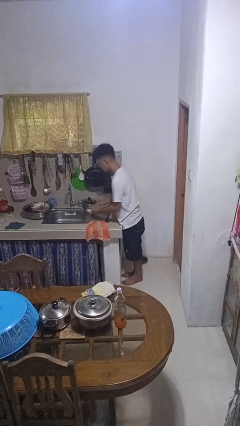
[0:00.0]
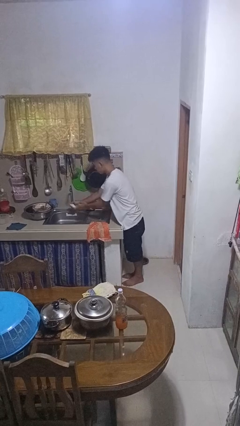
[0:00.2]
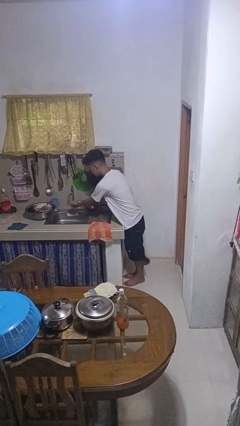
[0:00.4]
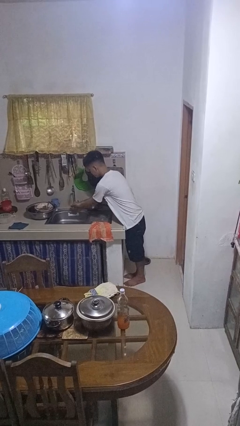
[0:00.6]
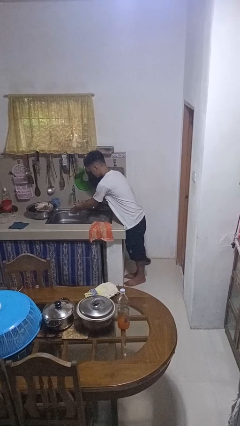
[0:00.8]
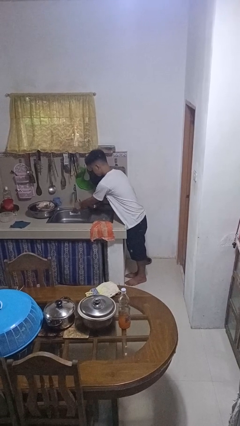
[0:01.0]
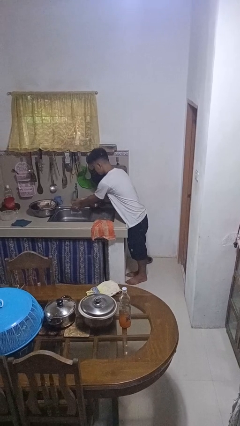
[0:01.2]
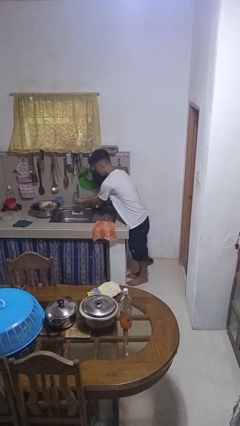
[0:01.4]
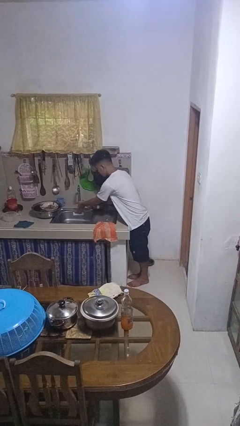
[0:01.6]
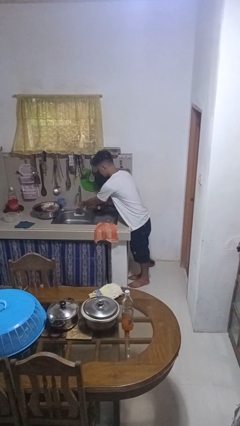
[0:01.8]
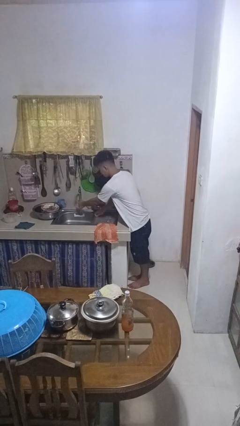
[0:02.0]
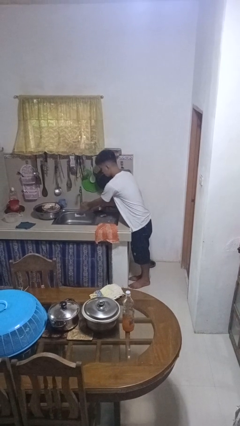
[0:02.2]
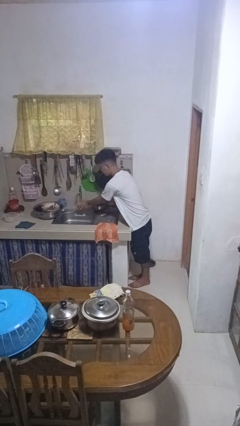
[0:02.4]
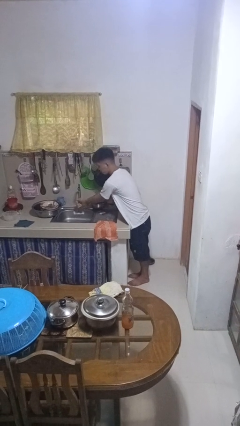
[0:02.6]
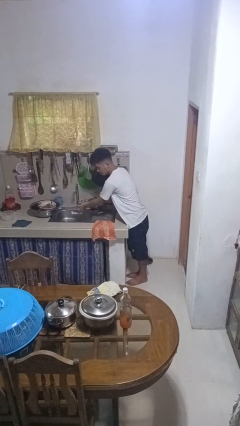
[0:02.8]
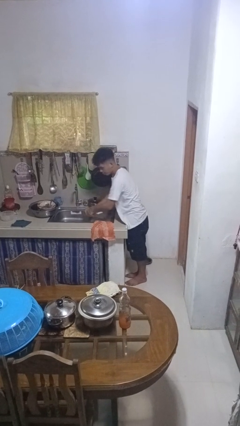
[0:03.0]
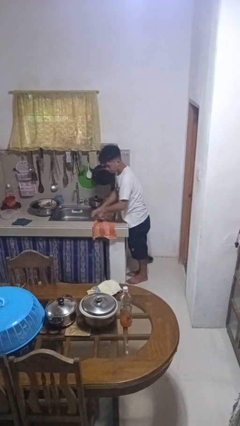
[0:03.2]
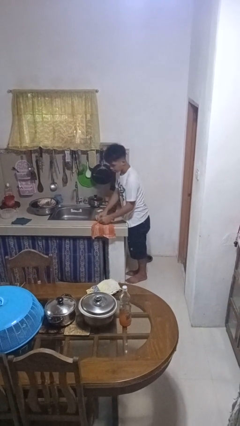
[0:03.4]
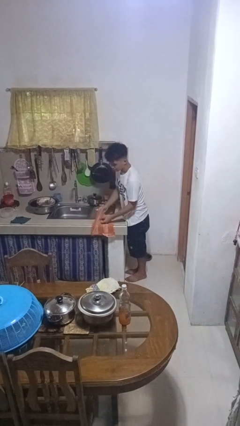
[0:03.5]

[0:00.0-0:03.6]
person washes hands

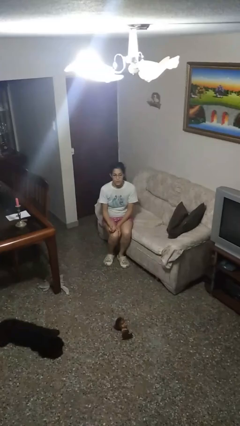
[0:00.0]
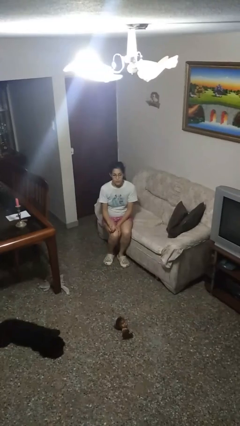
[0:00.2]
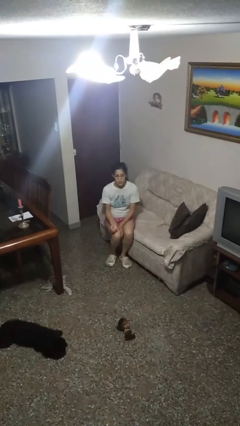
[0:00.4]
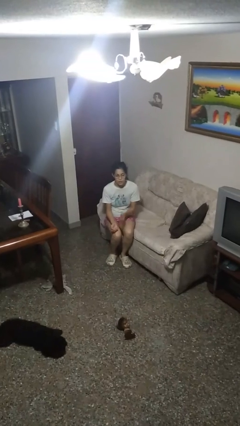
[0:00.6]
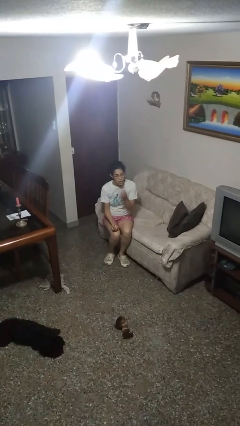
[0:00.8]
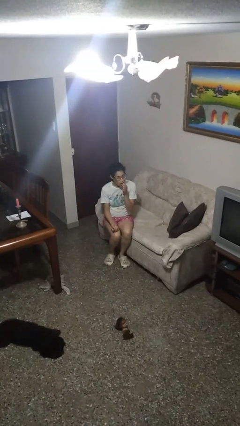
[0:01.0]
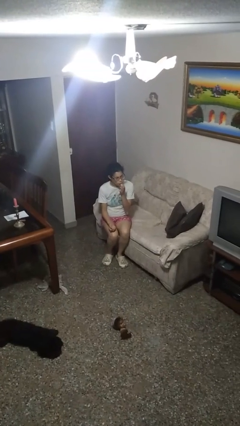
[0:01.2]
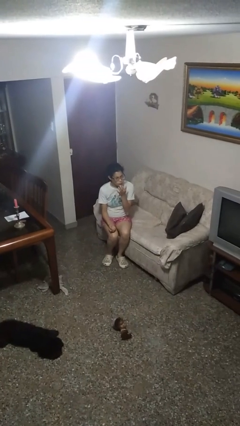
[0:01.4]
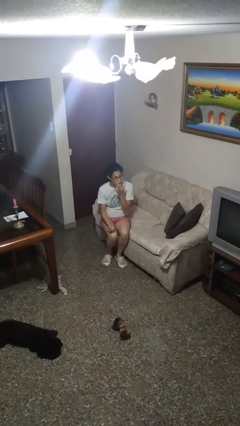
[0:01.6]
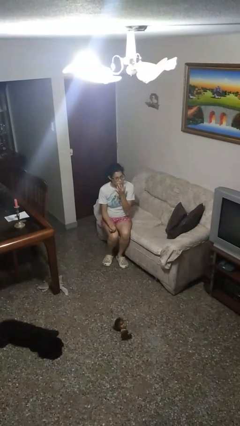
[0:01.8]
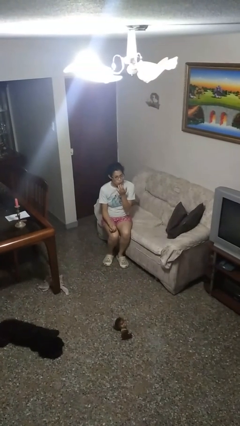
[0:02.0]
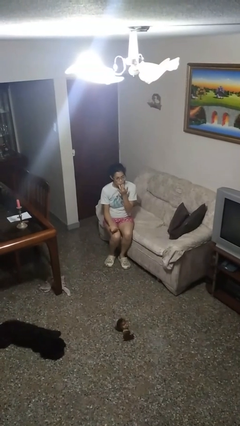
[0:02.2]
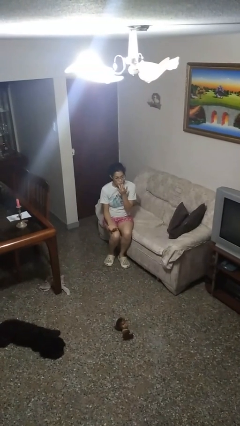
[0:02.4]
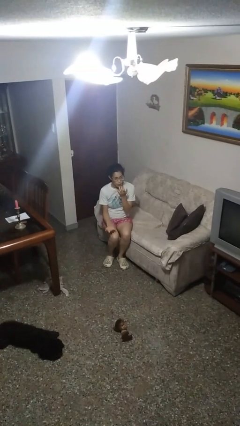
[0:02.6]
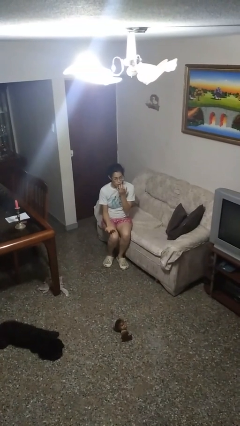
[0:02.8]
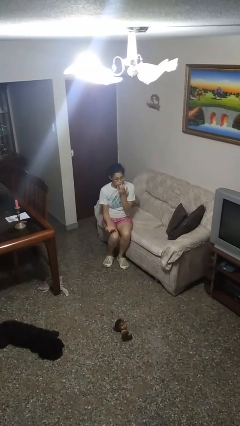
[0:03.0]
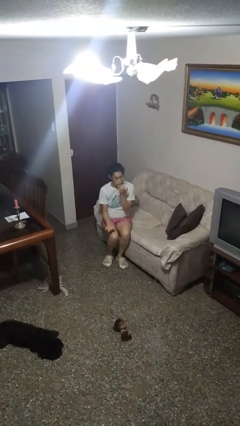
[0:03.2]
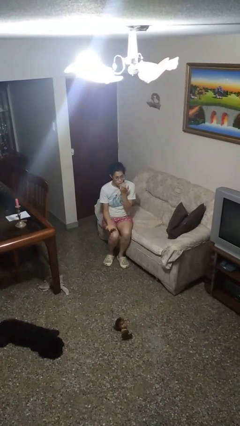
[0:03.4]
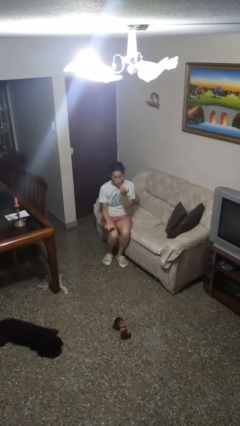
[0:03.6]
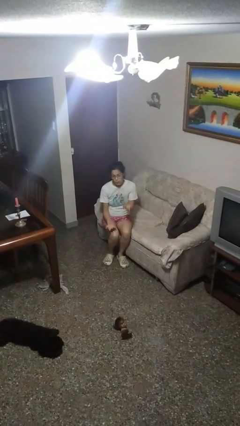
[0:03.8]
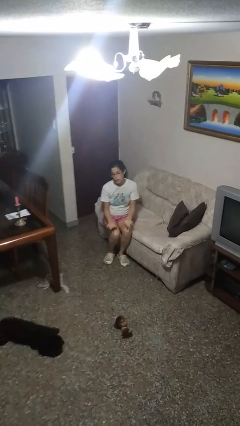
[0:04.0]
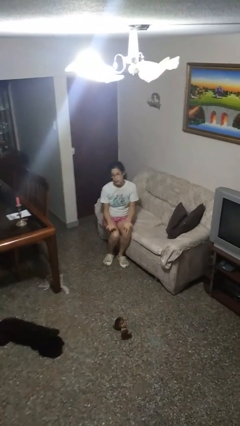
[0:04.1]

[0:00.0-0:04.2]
person licks fingers

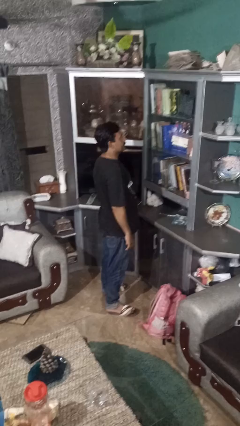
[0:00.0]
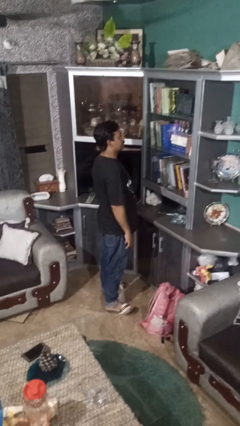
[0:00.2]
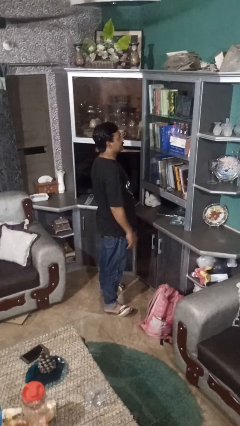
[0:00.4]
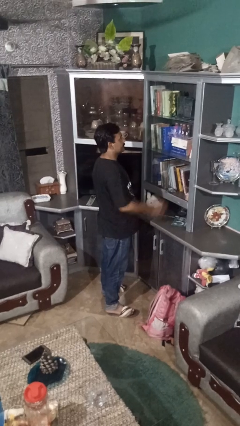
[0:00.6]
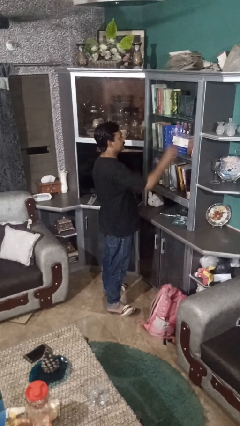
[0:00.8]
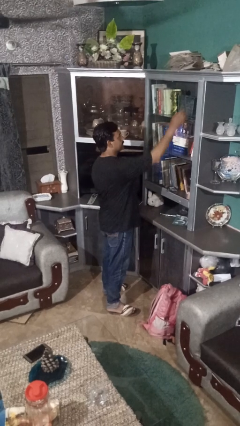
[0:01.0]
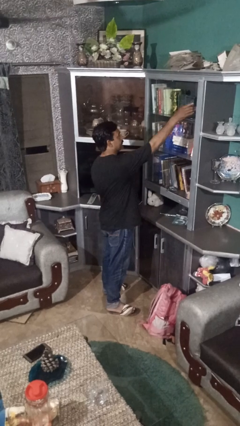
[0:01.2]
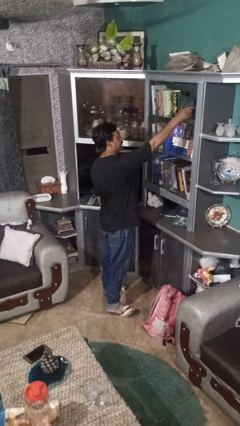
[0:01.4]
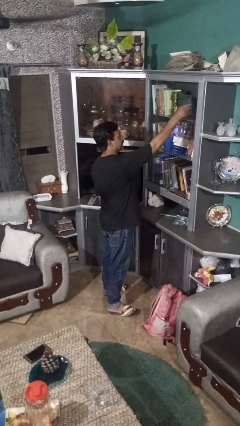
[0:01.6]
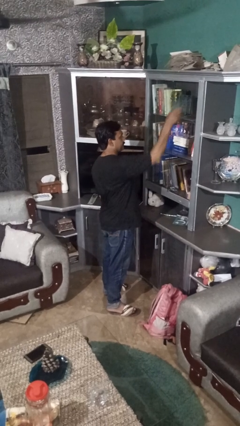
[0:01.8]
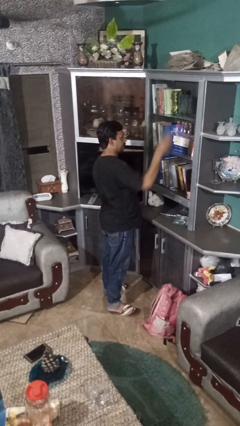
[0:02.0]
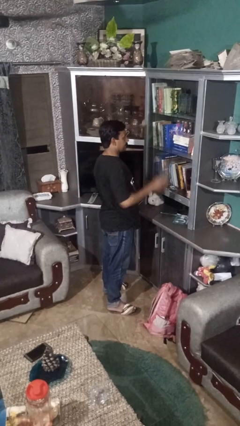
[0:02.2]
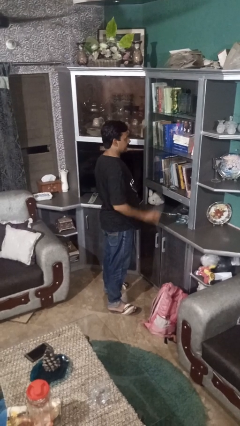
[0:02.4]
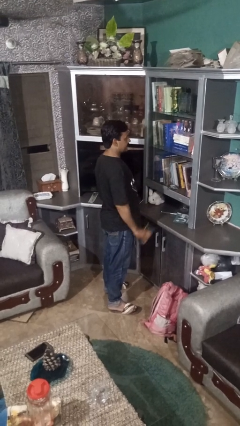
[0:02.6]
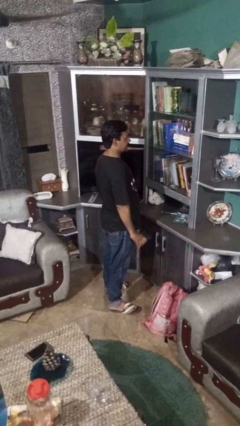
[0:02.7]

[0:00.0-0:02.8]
person picks up object from shelf

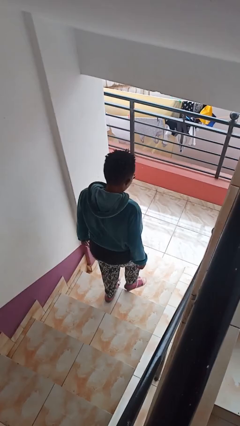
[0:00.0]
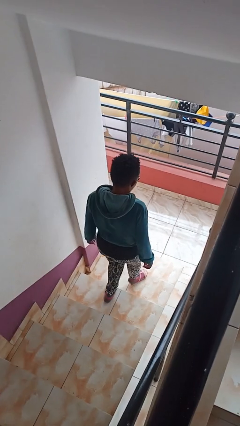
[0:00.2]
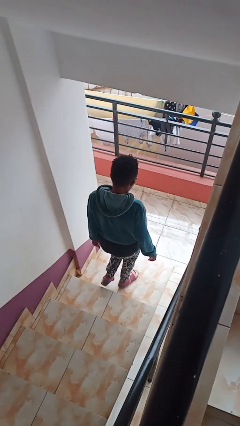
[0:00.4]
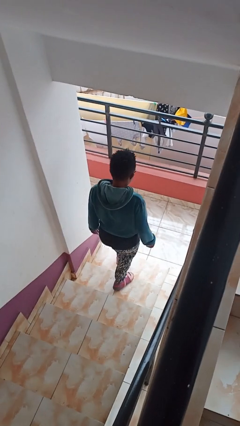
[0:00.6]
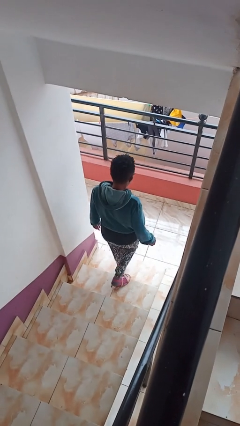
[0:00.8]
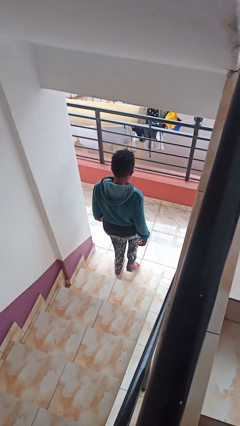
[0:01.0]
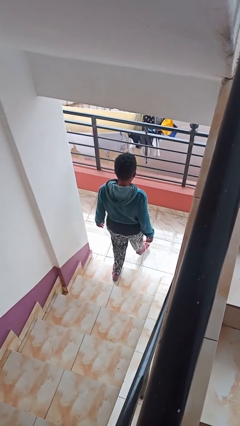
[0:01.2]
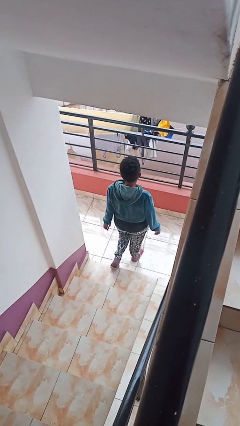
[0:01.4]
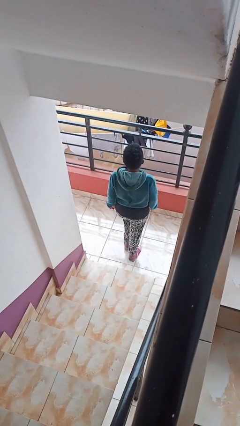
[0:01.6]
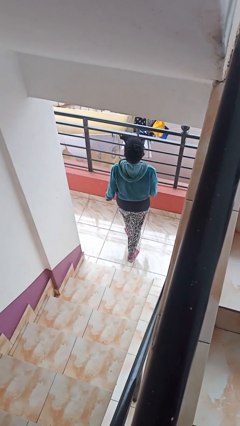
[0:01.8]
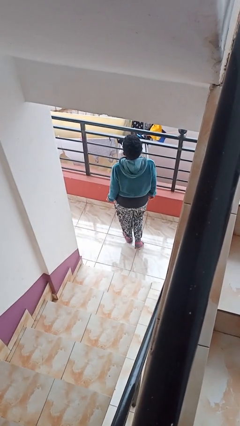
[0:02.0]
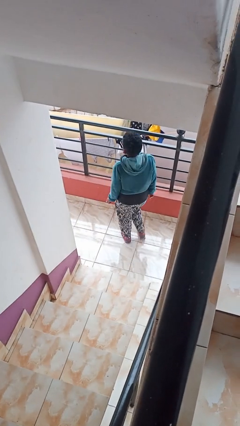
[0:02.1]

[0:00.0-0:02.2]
person climbs down stairs

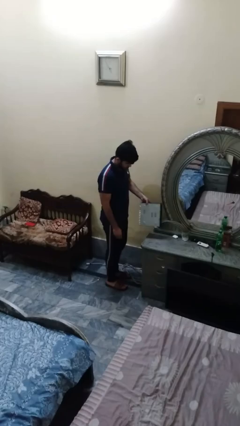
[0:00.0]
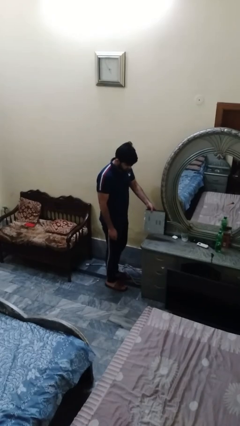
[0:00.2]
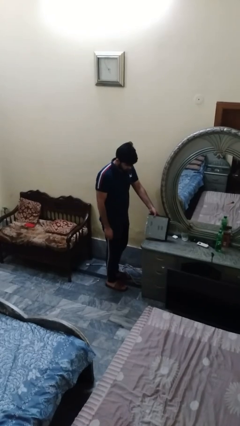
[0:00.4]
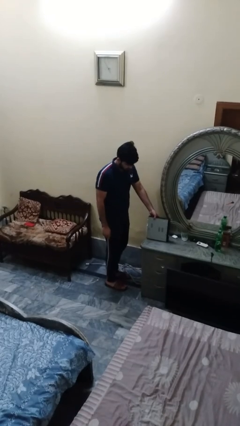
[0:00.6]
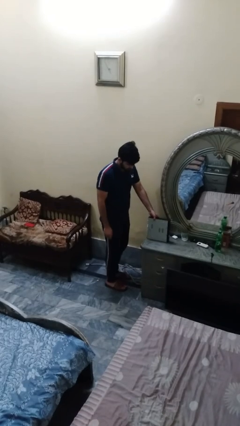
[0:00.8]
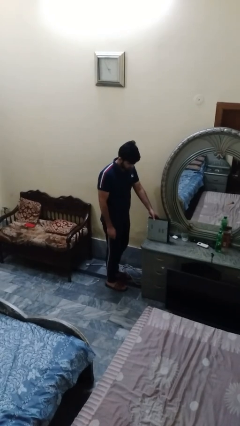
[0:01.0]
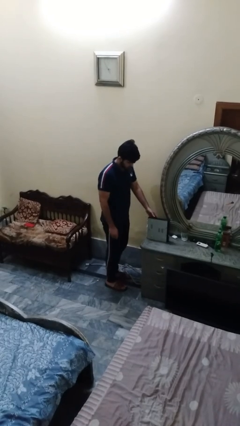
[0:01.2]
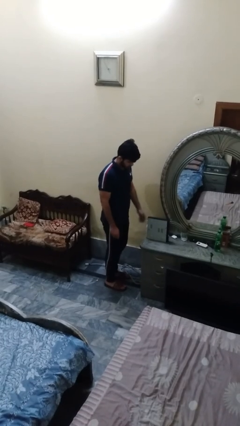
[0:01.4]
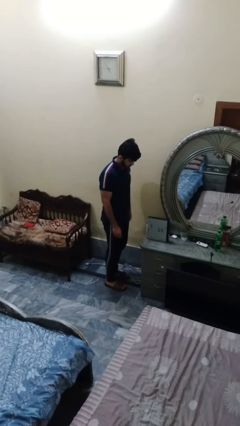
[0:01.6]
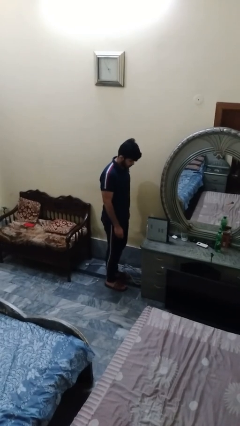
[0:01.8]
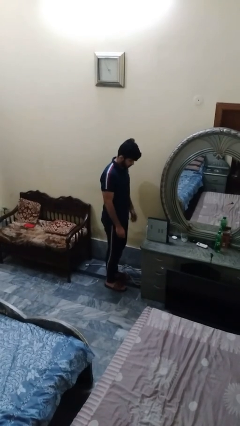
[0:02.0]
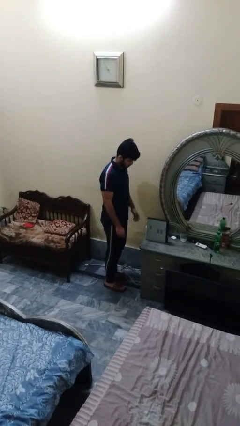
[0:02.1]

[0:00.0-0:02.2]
person puts down object on countertop

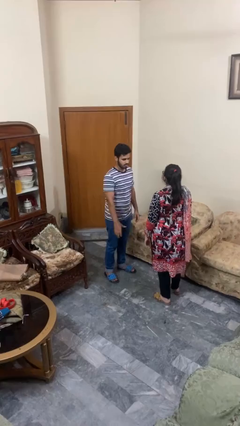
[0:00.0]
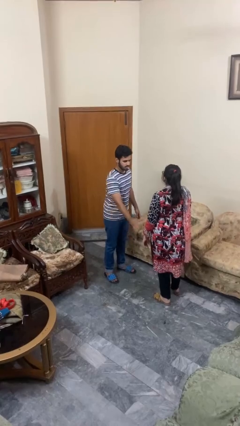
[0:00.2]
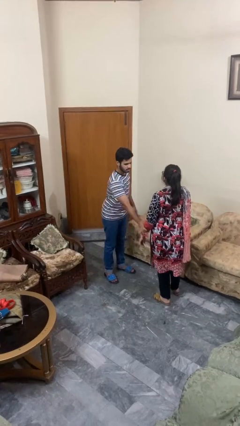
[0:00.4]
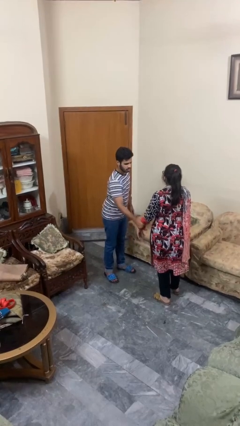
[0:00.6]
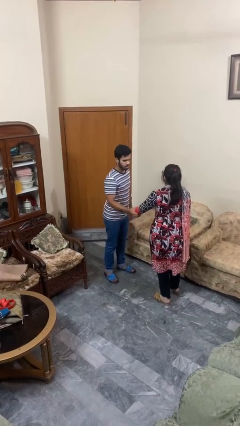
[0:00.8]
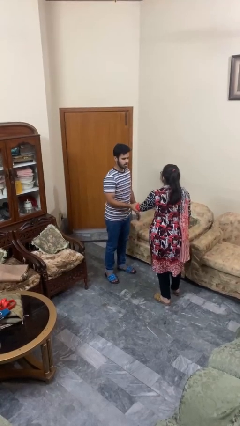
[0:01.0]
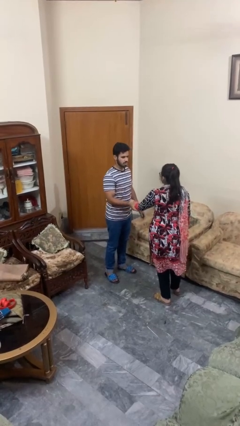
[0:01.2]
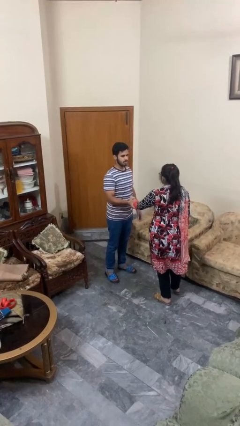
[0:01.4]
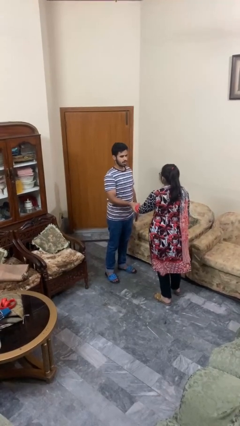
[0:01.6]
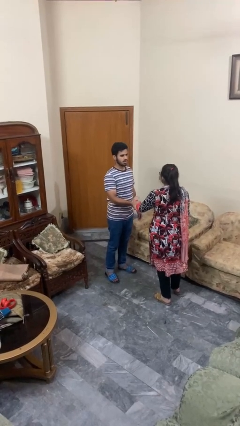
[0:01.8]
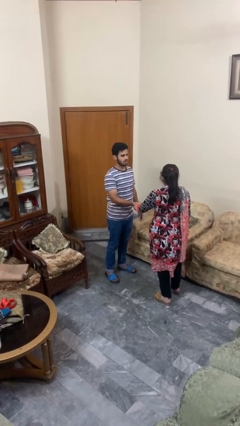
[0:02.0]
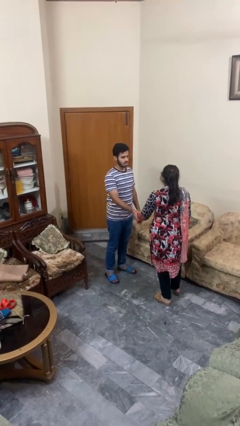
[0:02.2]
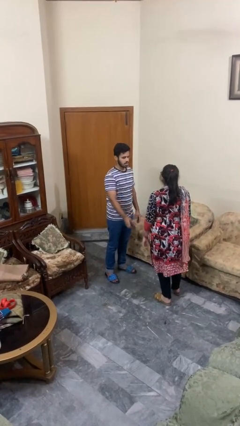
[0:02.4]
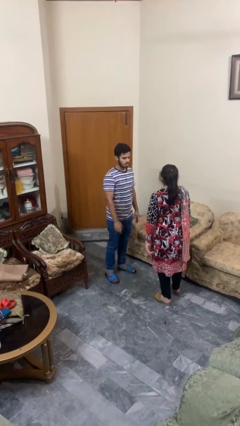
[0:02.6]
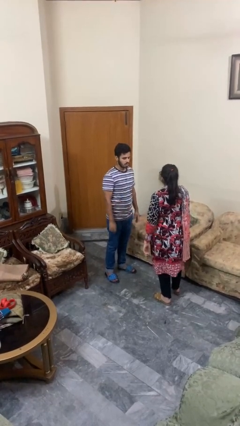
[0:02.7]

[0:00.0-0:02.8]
person grabs person by forearm
